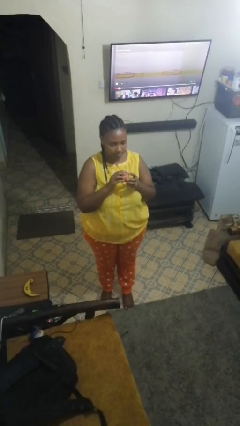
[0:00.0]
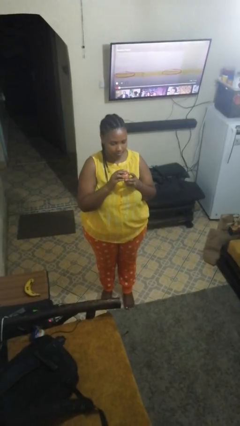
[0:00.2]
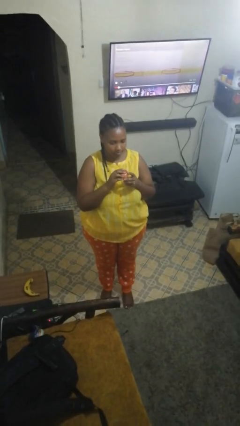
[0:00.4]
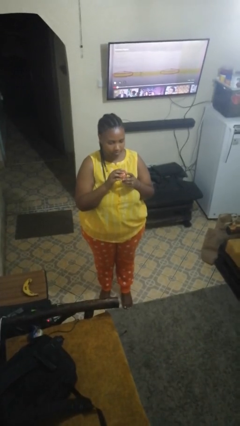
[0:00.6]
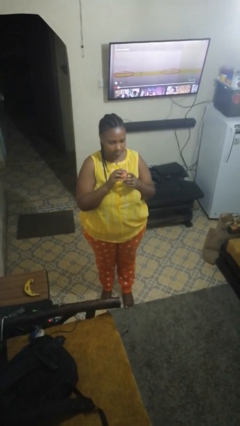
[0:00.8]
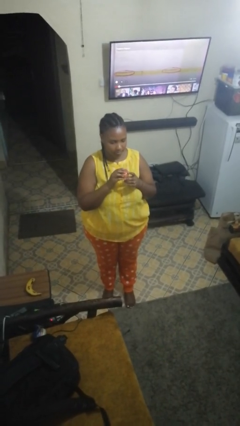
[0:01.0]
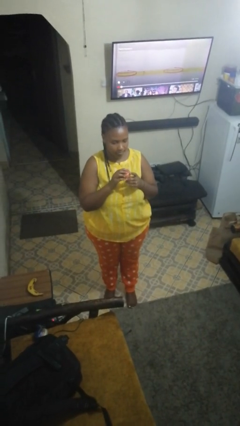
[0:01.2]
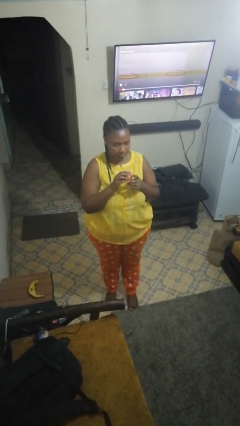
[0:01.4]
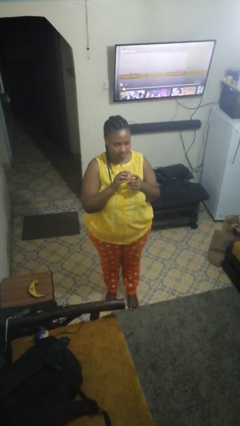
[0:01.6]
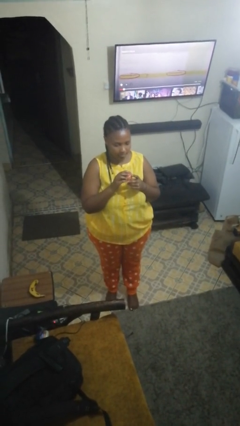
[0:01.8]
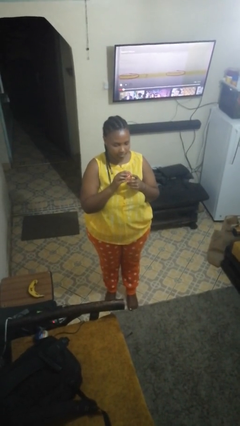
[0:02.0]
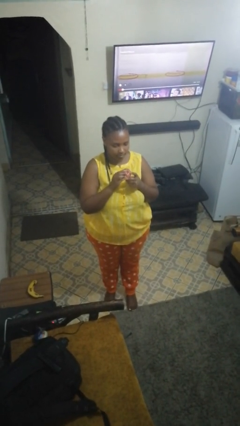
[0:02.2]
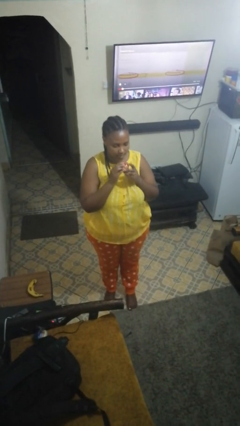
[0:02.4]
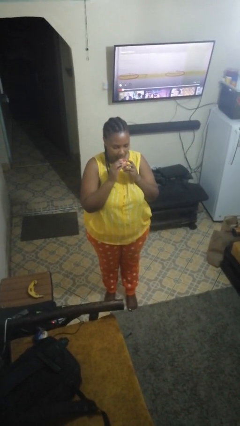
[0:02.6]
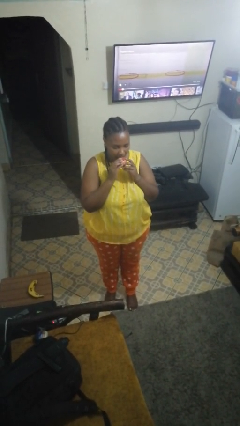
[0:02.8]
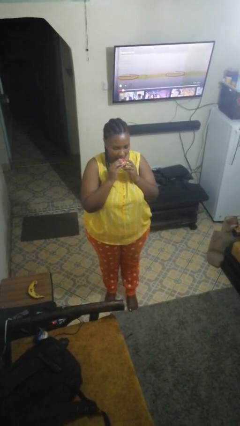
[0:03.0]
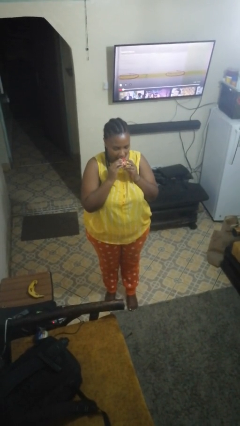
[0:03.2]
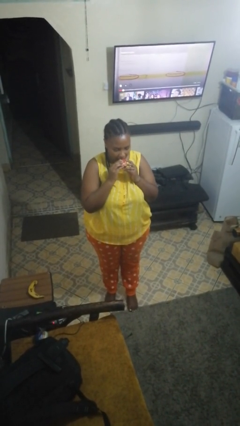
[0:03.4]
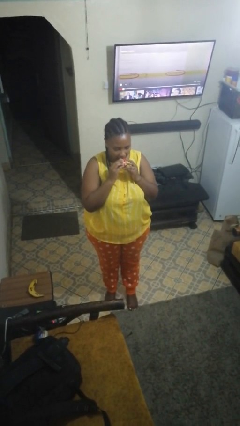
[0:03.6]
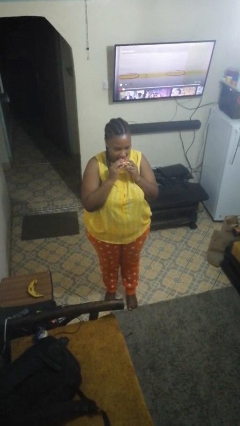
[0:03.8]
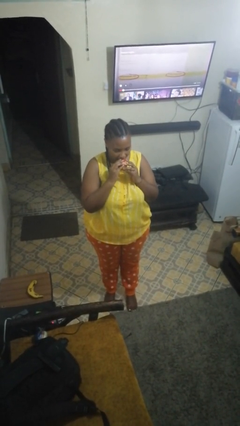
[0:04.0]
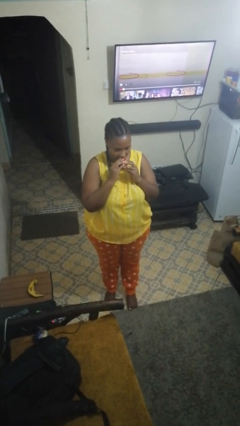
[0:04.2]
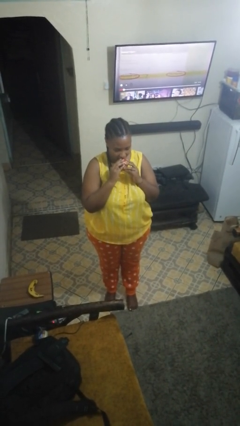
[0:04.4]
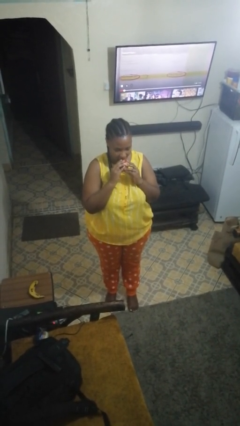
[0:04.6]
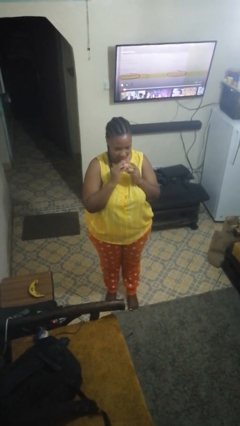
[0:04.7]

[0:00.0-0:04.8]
person eats apple

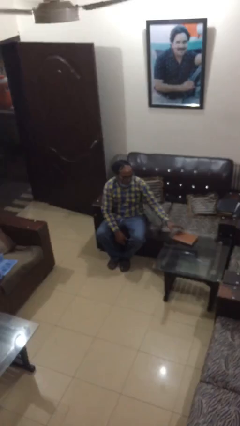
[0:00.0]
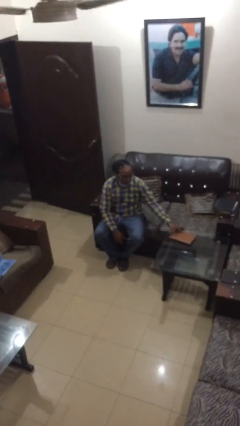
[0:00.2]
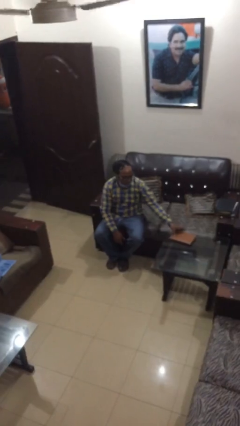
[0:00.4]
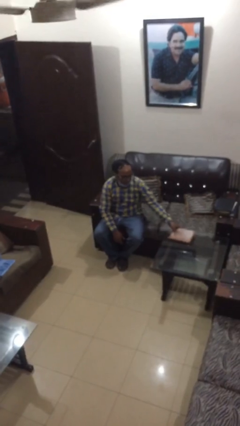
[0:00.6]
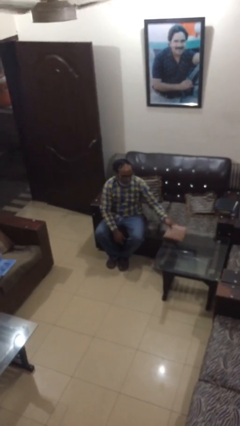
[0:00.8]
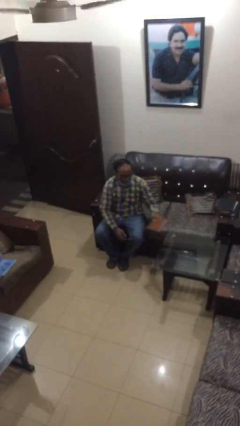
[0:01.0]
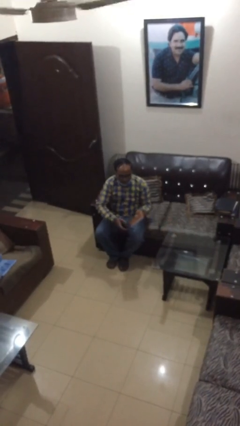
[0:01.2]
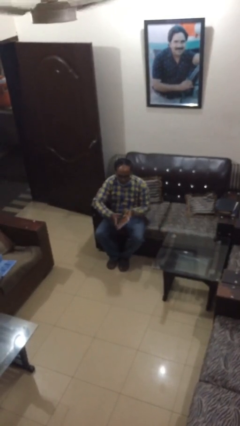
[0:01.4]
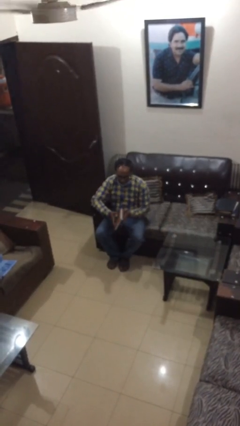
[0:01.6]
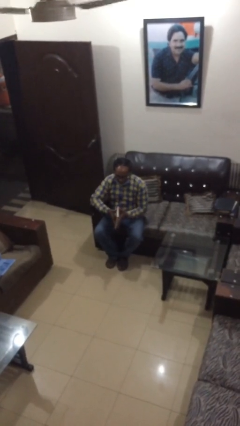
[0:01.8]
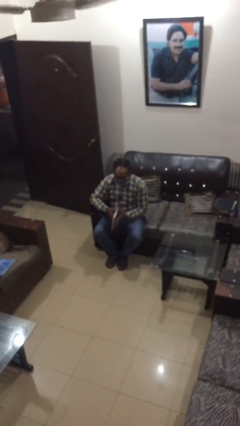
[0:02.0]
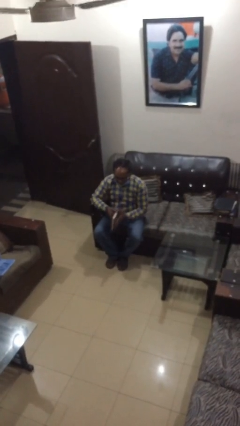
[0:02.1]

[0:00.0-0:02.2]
person picks up object from table

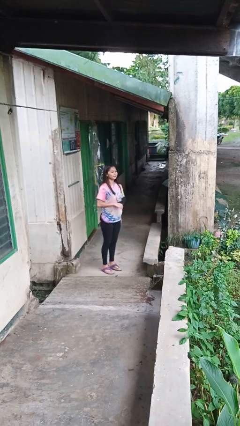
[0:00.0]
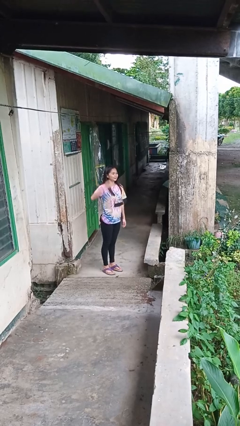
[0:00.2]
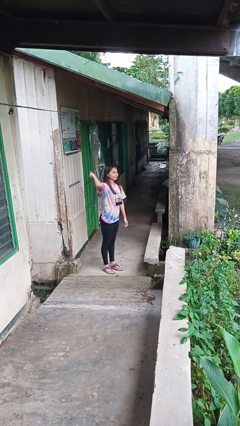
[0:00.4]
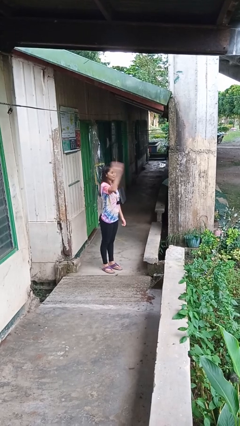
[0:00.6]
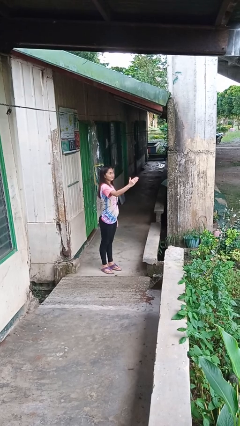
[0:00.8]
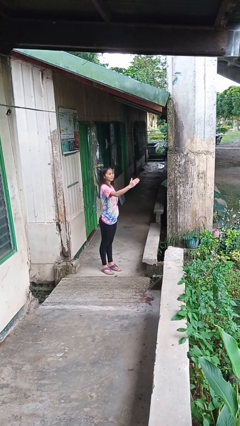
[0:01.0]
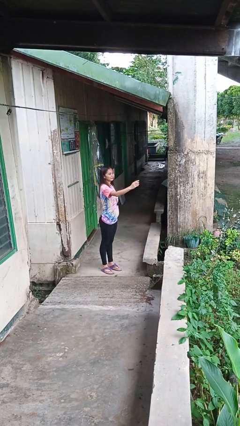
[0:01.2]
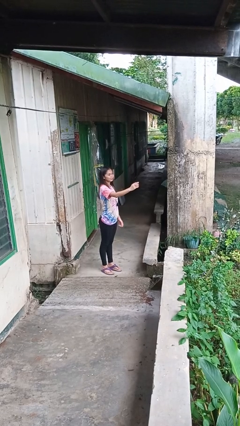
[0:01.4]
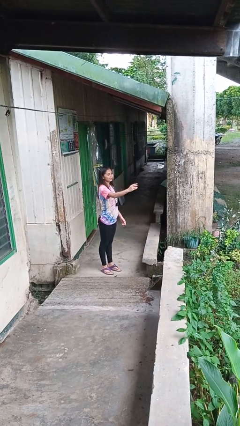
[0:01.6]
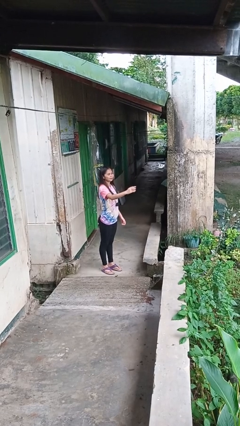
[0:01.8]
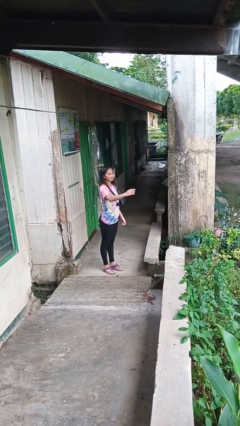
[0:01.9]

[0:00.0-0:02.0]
person karate chop

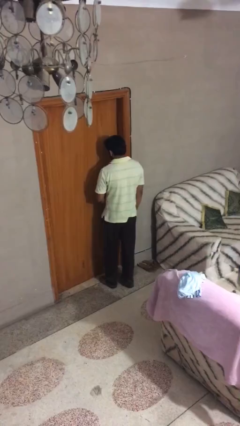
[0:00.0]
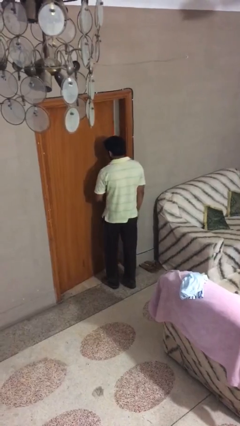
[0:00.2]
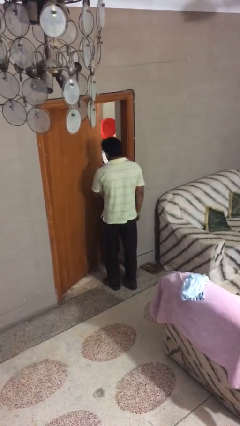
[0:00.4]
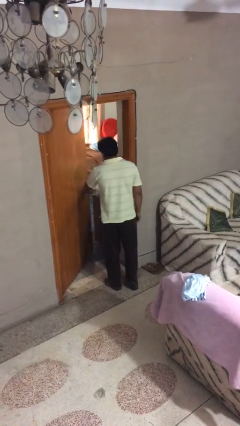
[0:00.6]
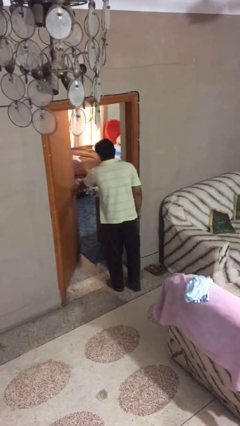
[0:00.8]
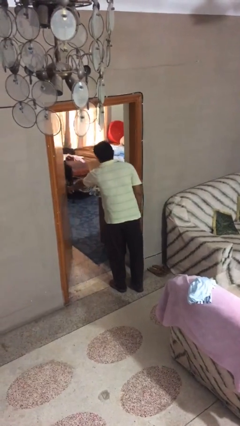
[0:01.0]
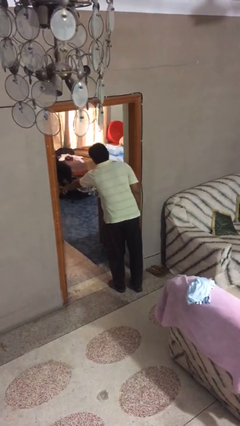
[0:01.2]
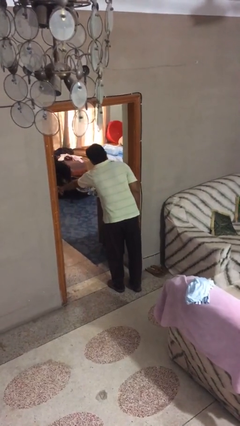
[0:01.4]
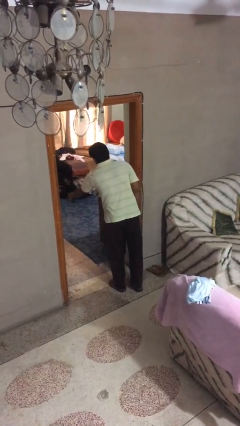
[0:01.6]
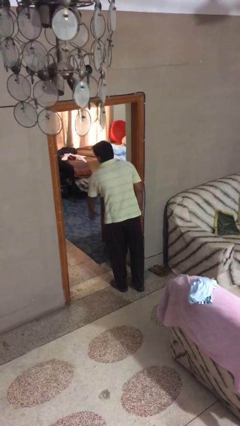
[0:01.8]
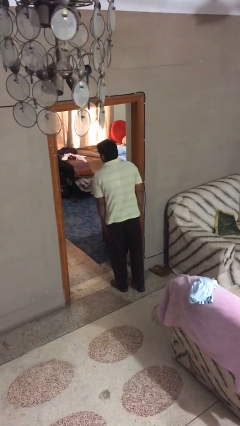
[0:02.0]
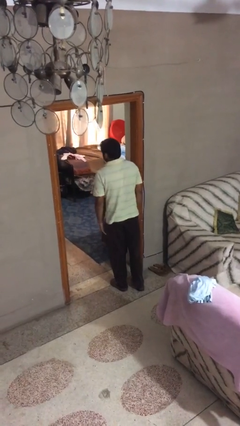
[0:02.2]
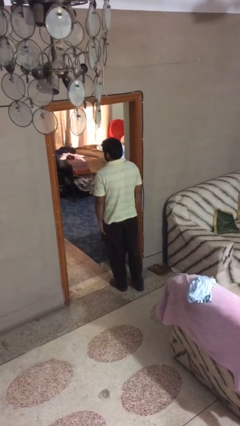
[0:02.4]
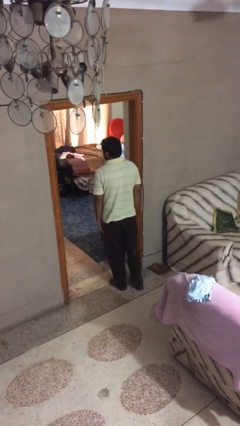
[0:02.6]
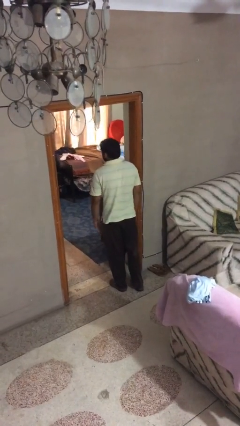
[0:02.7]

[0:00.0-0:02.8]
person opens facility door

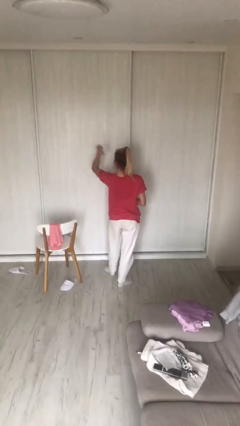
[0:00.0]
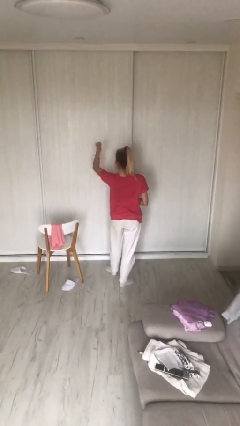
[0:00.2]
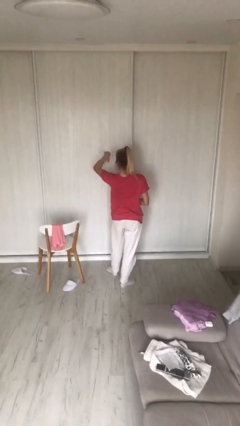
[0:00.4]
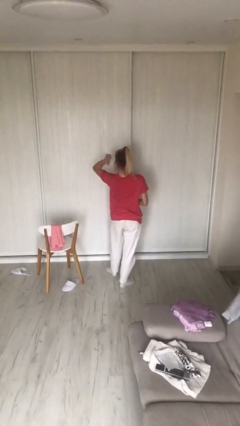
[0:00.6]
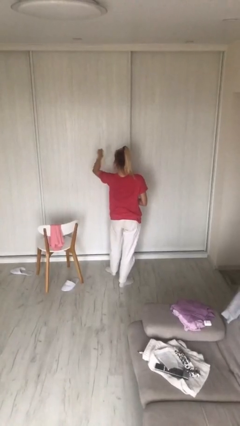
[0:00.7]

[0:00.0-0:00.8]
person gestures behind me

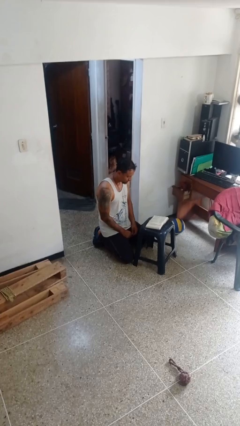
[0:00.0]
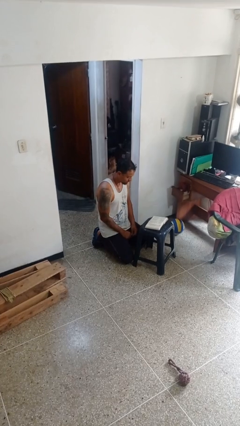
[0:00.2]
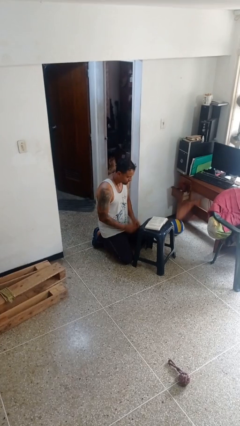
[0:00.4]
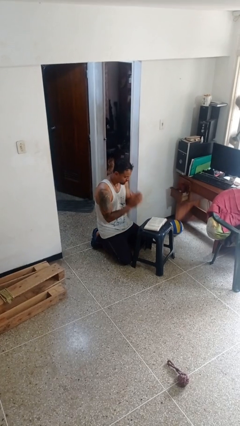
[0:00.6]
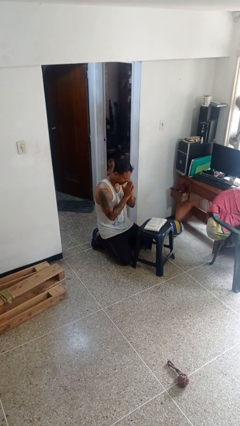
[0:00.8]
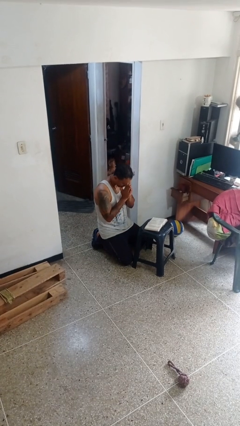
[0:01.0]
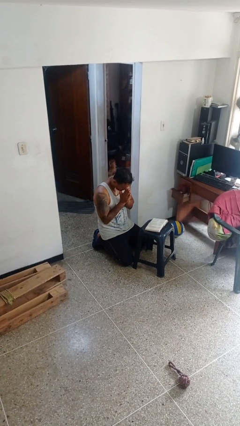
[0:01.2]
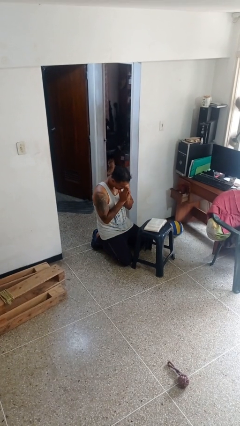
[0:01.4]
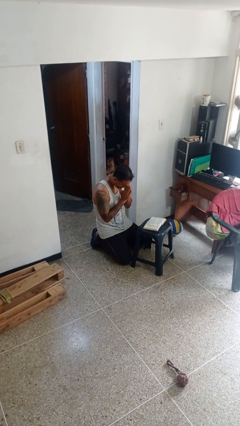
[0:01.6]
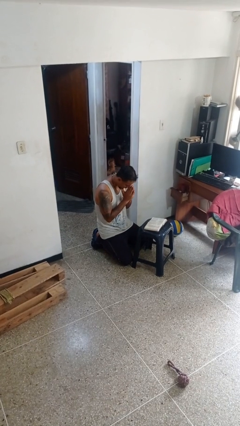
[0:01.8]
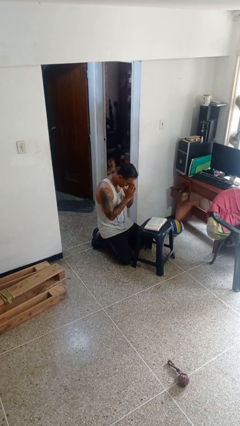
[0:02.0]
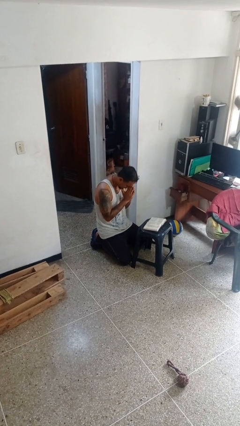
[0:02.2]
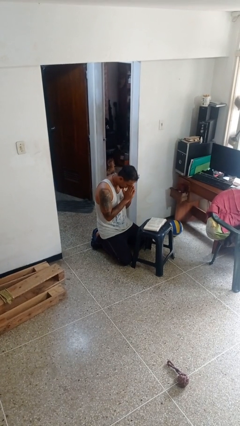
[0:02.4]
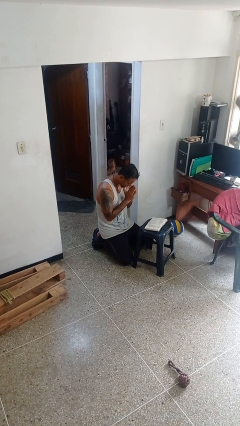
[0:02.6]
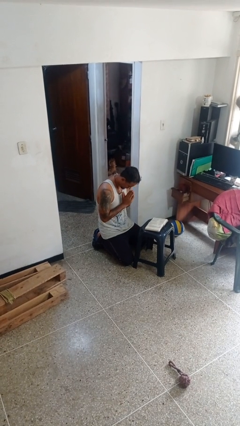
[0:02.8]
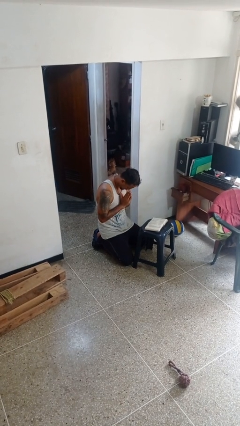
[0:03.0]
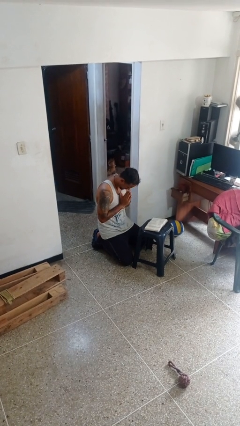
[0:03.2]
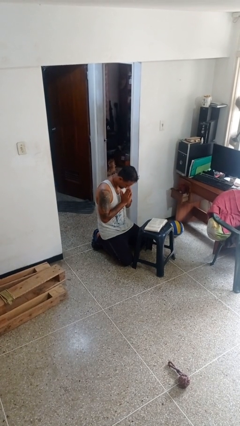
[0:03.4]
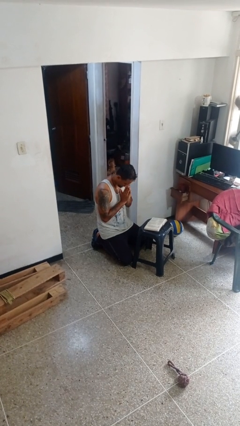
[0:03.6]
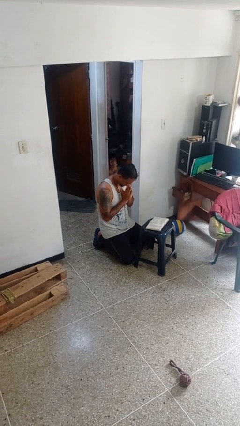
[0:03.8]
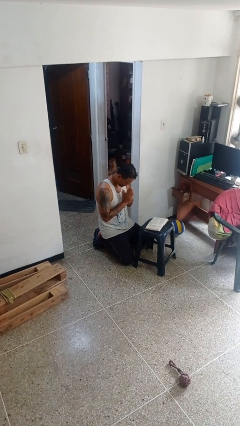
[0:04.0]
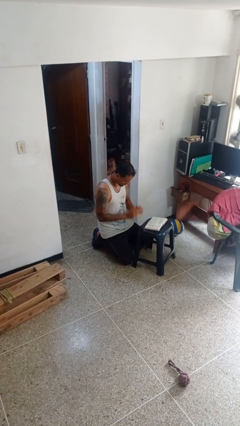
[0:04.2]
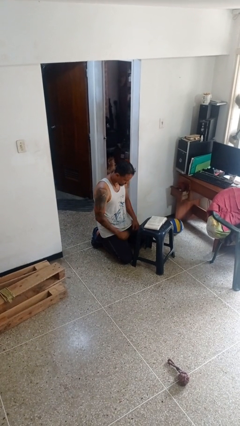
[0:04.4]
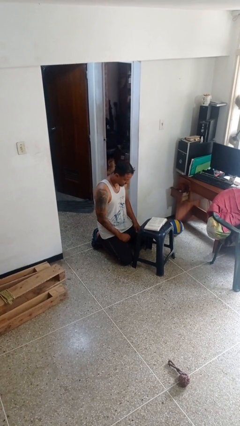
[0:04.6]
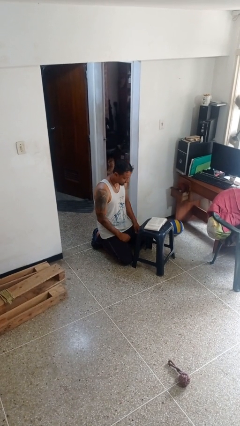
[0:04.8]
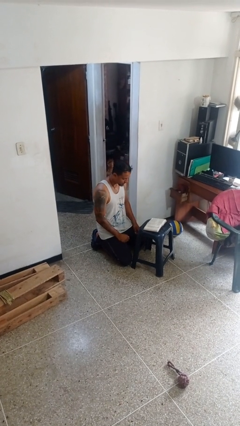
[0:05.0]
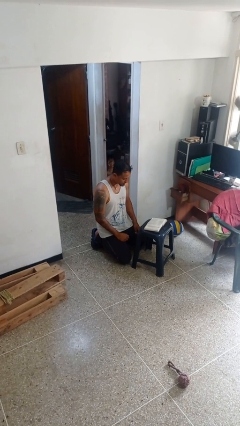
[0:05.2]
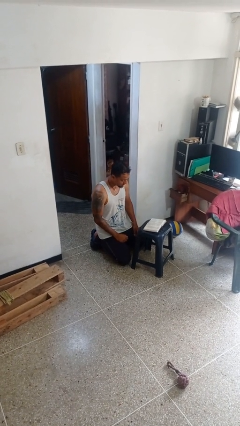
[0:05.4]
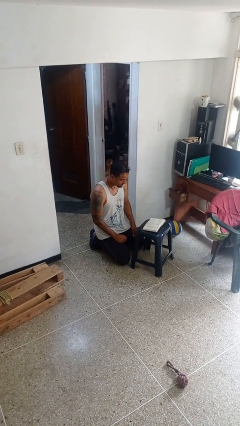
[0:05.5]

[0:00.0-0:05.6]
person prays
